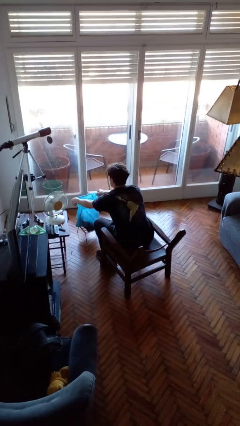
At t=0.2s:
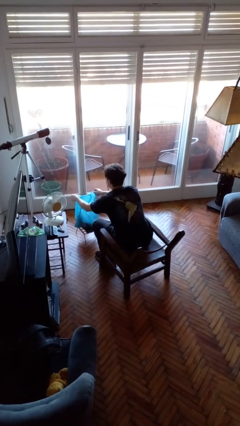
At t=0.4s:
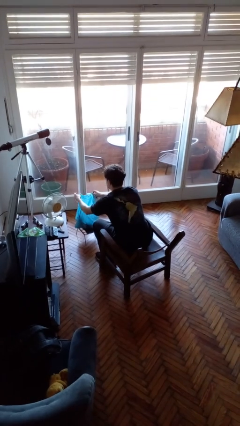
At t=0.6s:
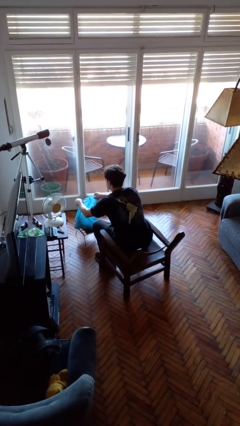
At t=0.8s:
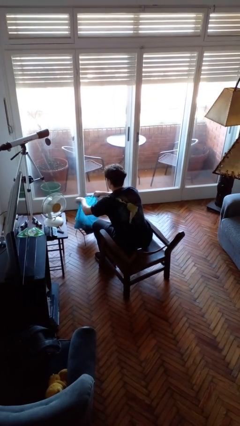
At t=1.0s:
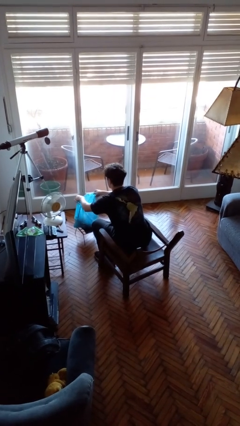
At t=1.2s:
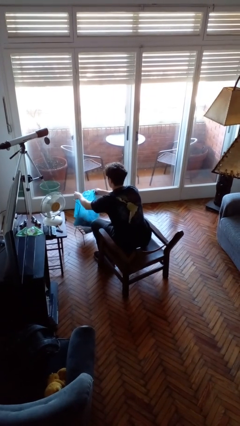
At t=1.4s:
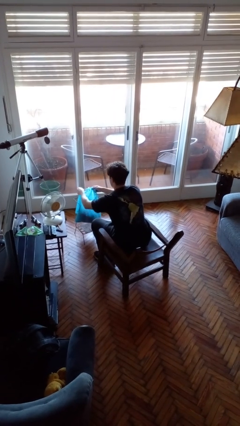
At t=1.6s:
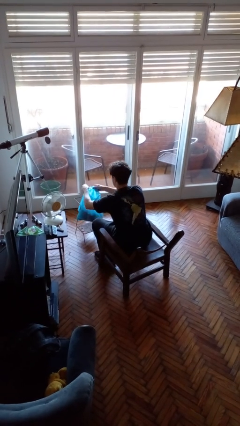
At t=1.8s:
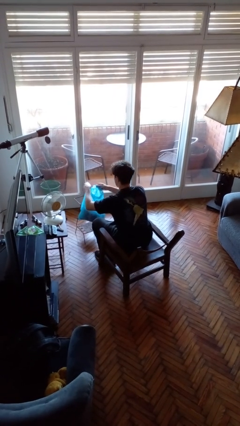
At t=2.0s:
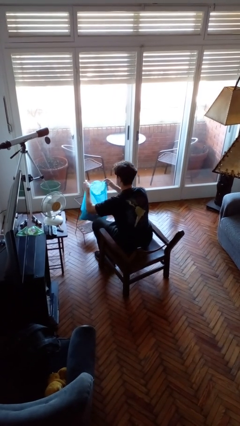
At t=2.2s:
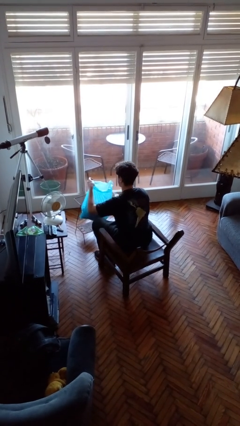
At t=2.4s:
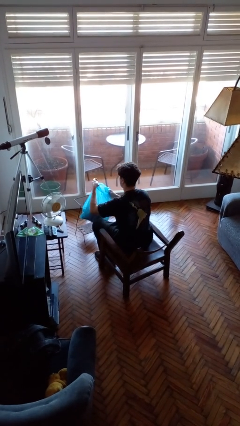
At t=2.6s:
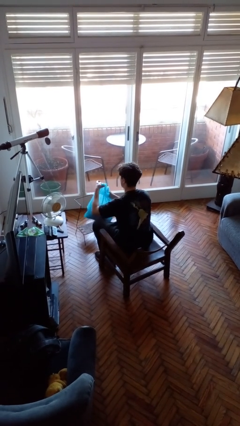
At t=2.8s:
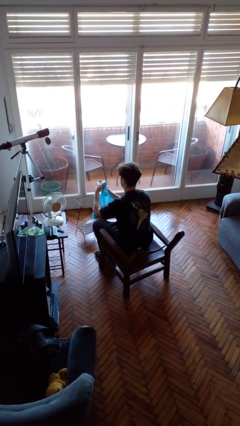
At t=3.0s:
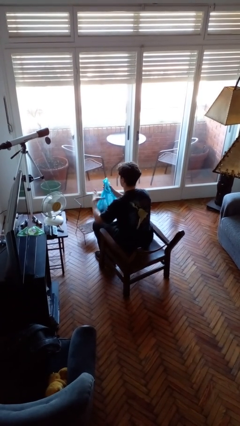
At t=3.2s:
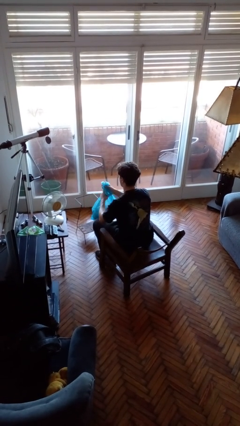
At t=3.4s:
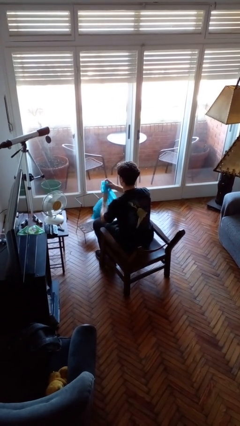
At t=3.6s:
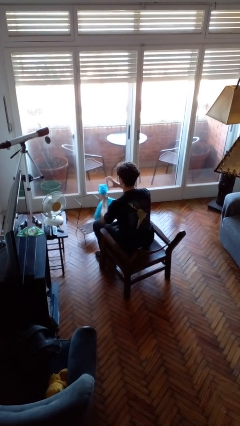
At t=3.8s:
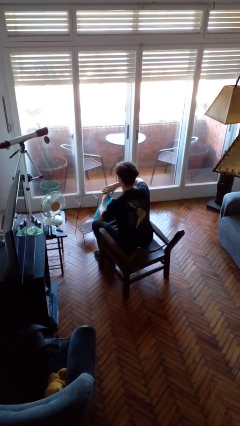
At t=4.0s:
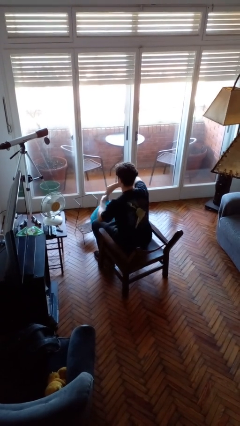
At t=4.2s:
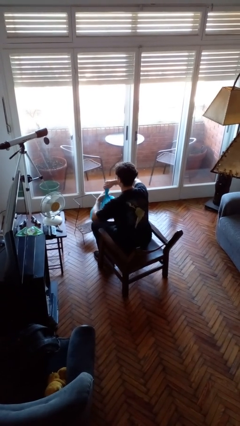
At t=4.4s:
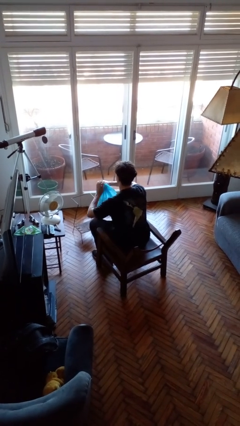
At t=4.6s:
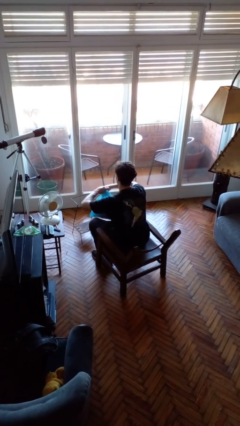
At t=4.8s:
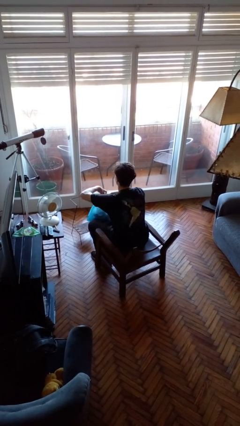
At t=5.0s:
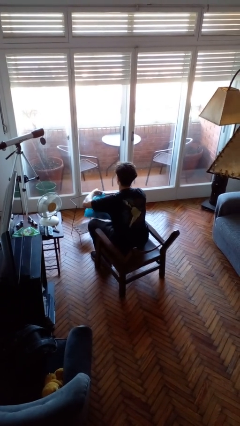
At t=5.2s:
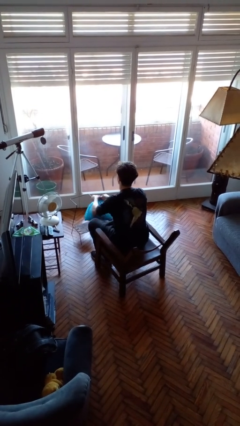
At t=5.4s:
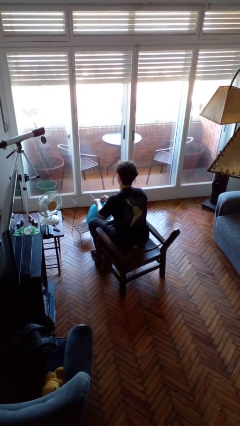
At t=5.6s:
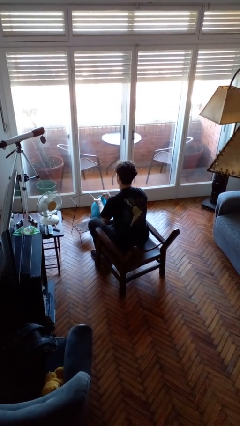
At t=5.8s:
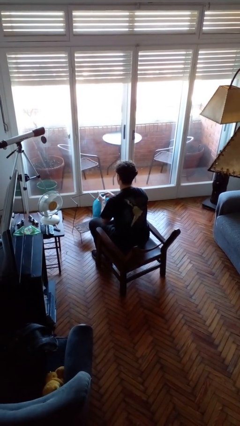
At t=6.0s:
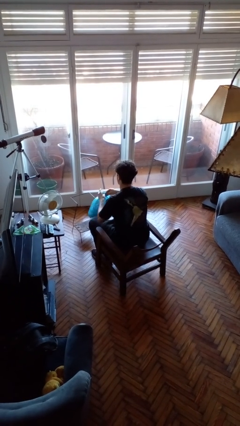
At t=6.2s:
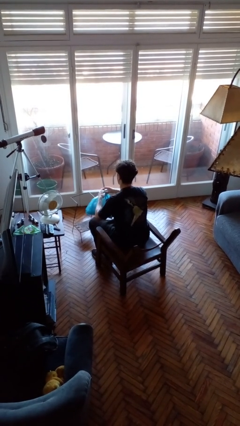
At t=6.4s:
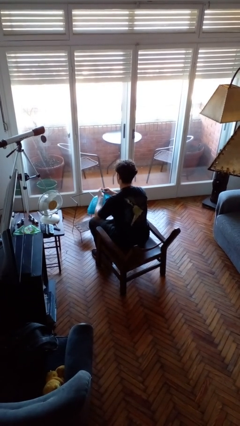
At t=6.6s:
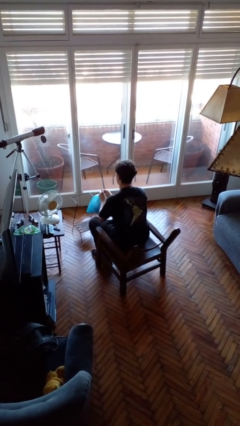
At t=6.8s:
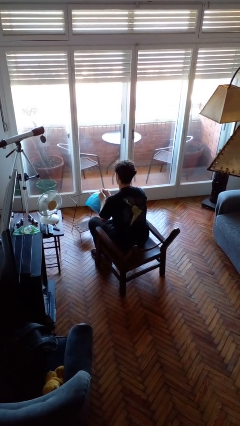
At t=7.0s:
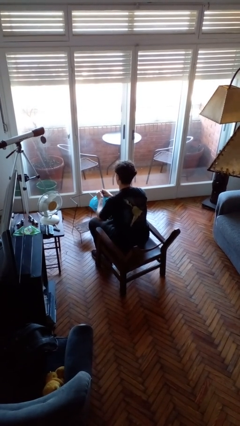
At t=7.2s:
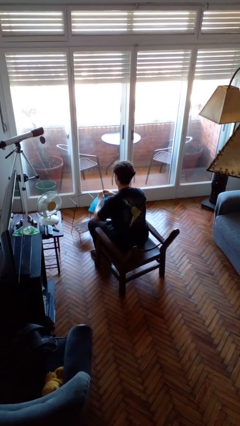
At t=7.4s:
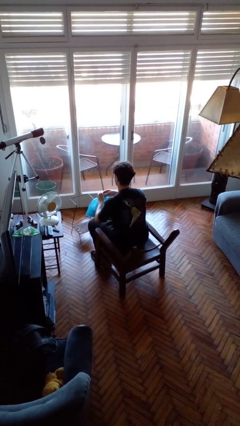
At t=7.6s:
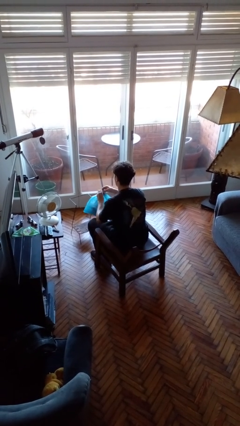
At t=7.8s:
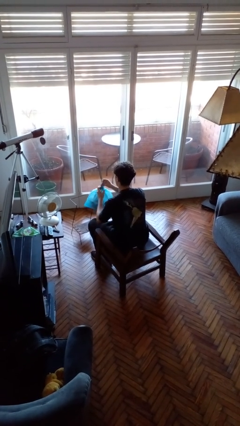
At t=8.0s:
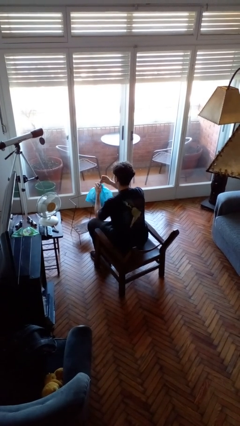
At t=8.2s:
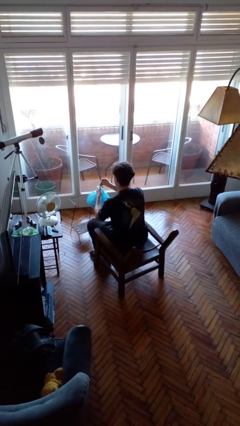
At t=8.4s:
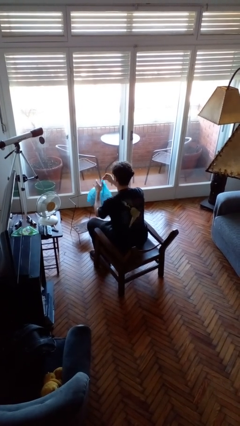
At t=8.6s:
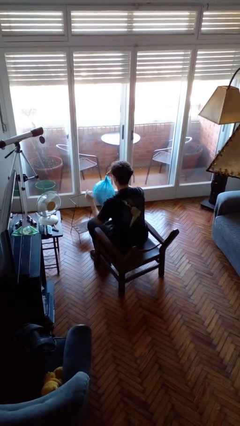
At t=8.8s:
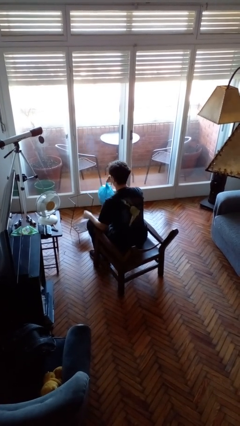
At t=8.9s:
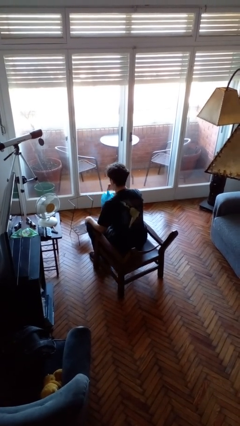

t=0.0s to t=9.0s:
person removes trashbag from trashcan

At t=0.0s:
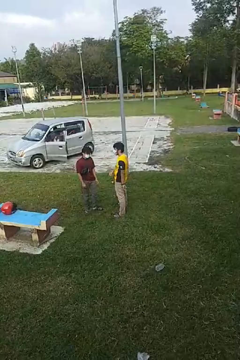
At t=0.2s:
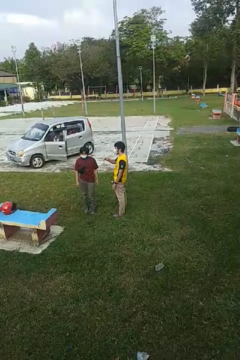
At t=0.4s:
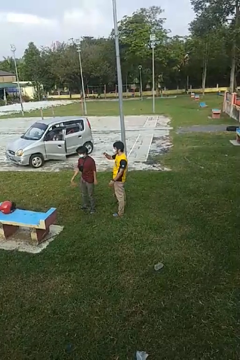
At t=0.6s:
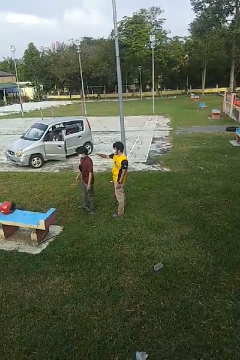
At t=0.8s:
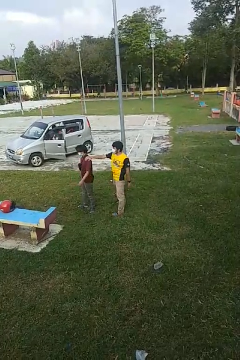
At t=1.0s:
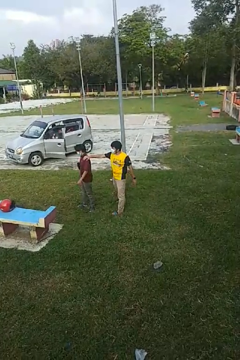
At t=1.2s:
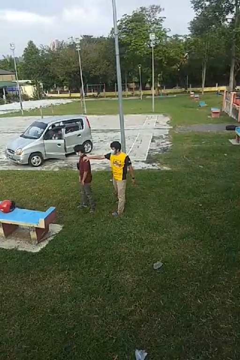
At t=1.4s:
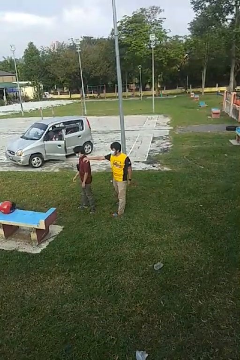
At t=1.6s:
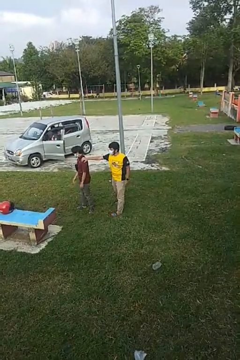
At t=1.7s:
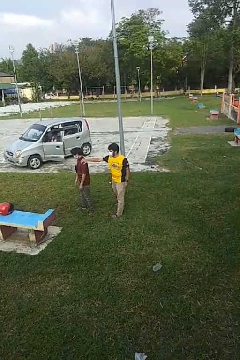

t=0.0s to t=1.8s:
person grabs person by shoulder

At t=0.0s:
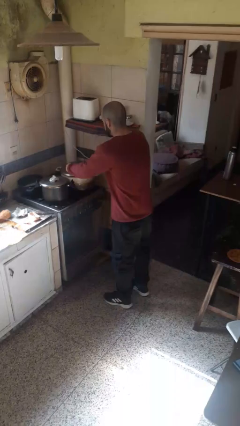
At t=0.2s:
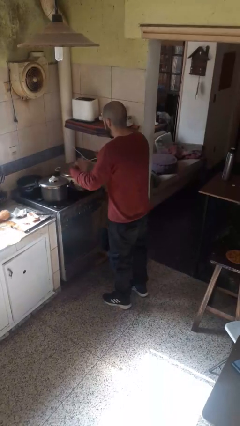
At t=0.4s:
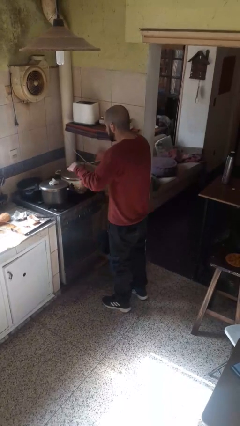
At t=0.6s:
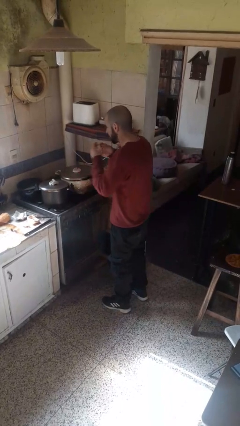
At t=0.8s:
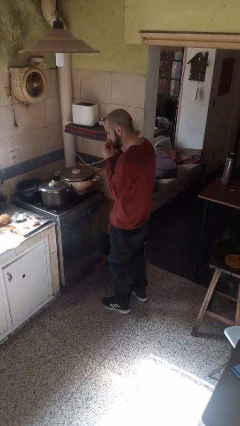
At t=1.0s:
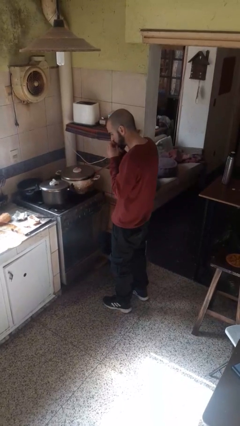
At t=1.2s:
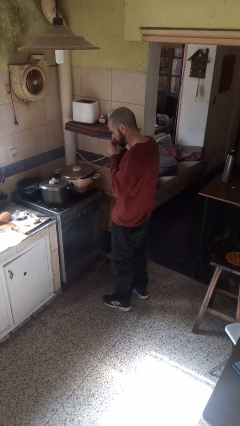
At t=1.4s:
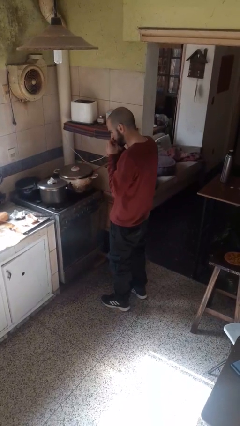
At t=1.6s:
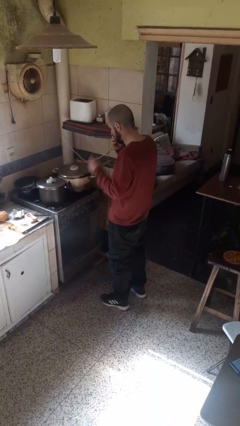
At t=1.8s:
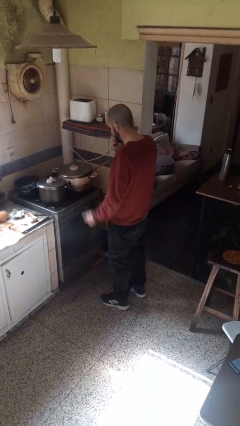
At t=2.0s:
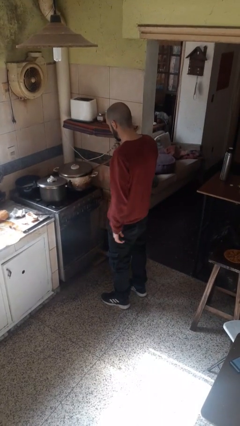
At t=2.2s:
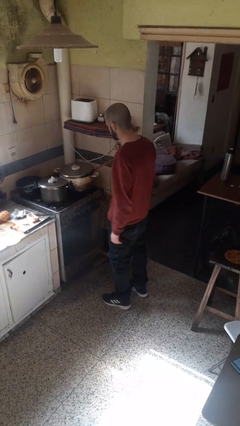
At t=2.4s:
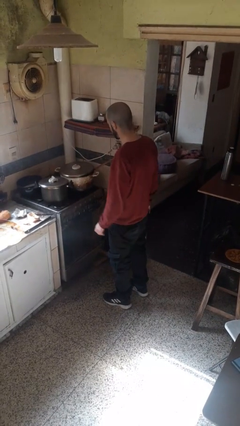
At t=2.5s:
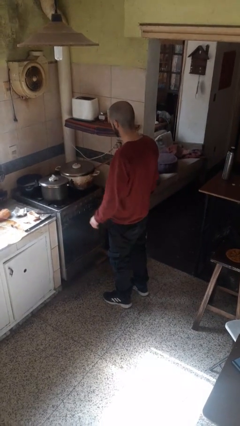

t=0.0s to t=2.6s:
person burns hand

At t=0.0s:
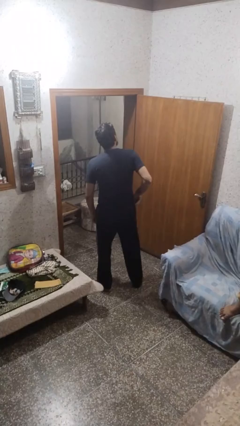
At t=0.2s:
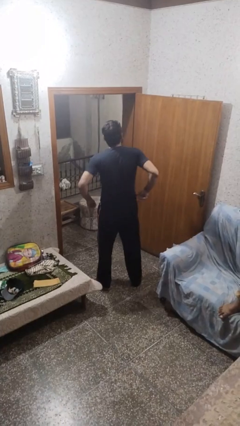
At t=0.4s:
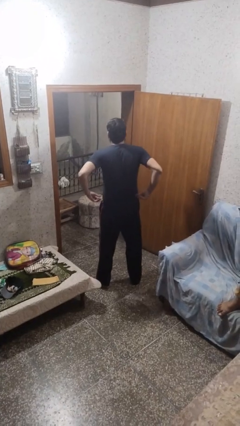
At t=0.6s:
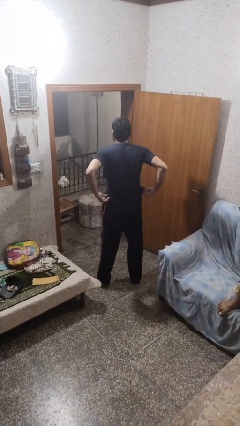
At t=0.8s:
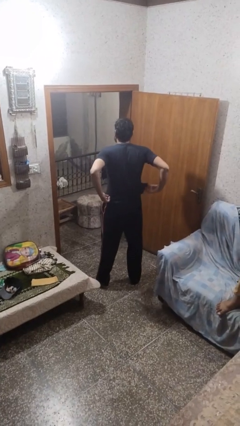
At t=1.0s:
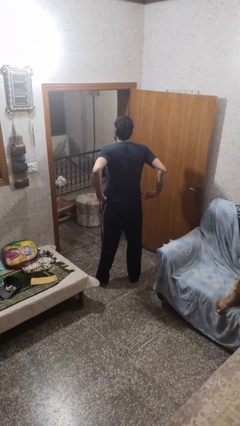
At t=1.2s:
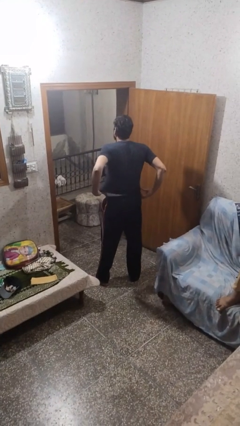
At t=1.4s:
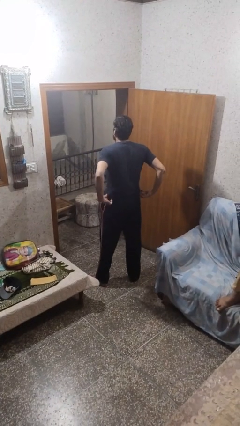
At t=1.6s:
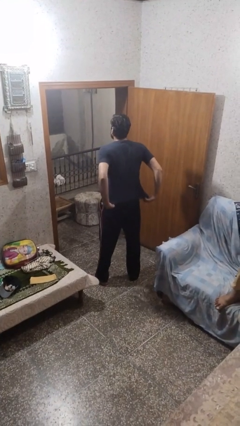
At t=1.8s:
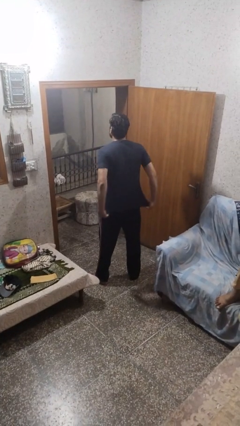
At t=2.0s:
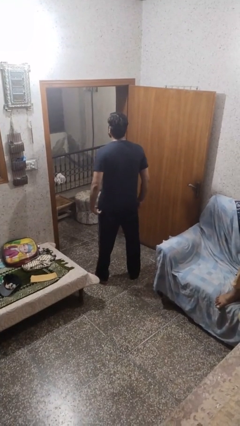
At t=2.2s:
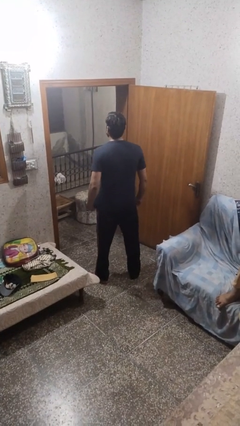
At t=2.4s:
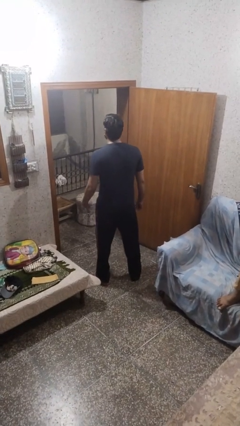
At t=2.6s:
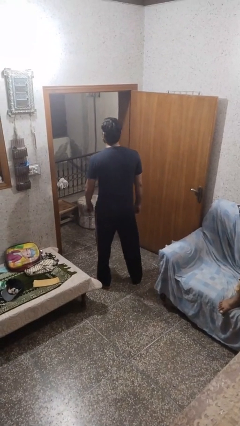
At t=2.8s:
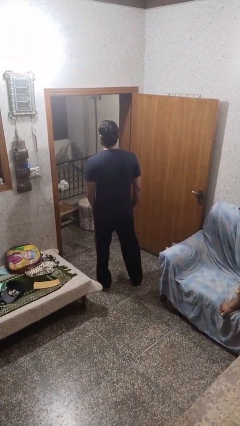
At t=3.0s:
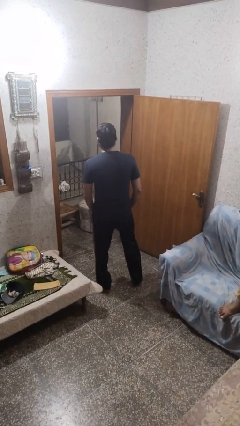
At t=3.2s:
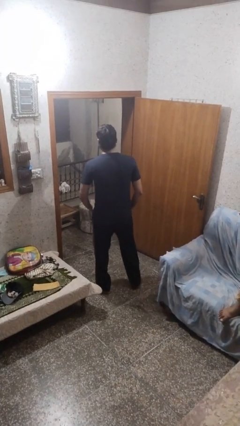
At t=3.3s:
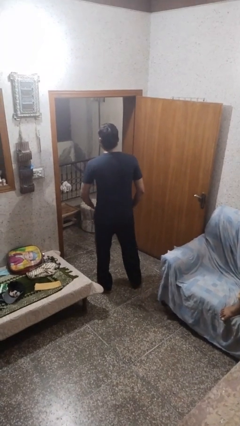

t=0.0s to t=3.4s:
person untucks shirt

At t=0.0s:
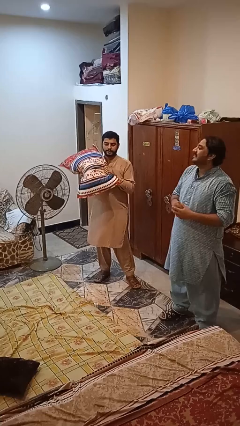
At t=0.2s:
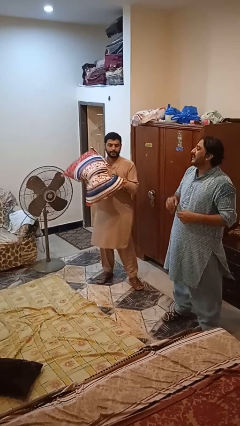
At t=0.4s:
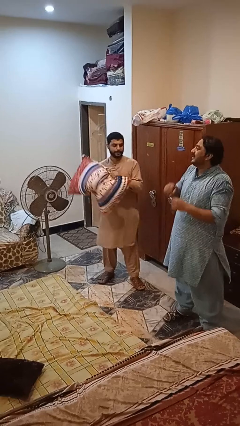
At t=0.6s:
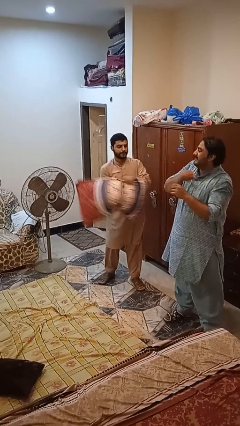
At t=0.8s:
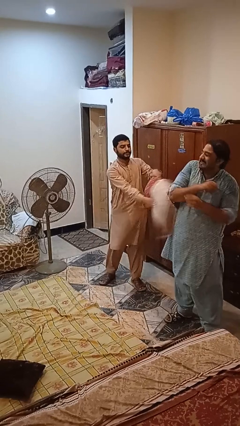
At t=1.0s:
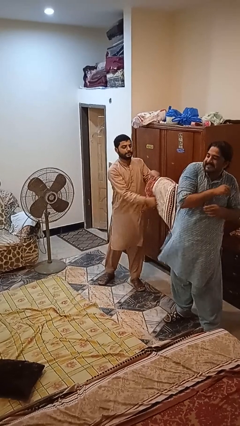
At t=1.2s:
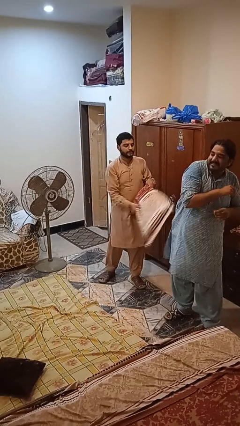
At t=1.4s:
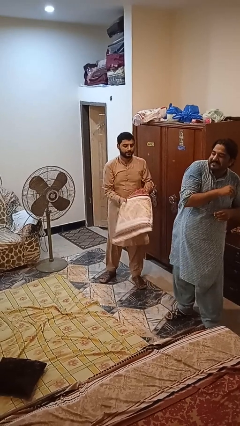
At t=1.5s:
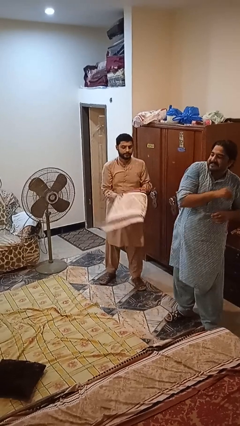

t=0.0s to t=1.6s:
person hits person with pillow
